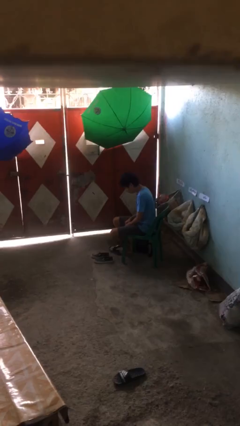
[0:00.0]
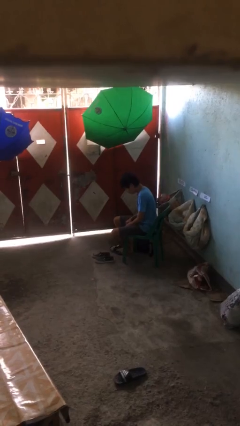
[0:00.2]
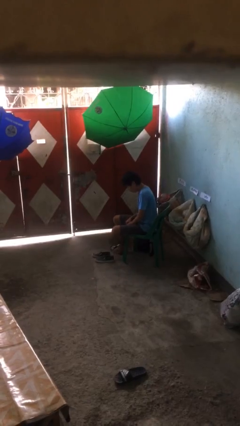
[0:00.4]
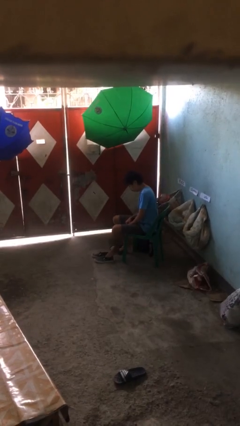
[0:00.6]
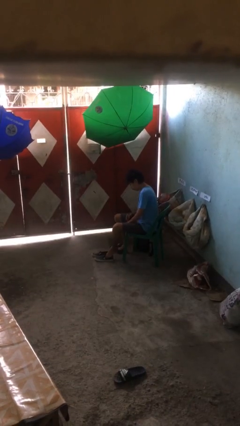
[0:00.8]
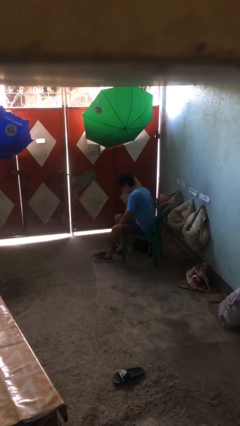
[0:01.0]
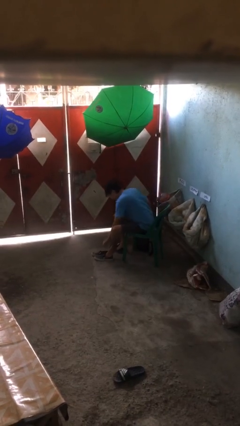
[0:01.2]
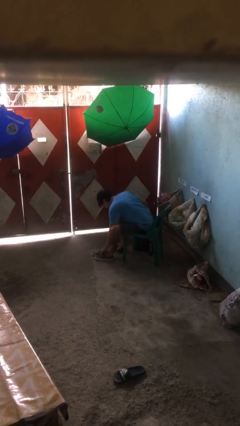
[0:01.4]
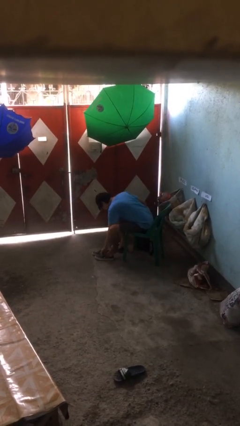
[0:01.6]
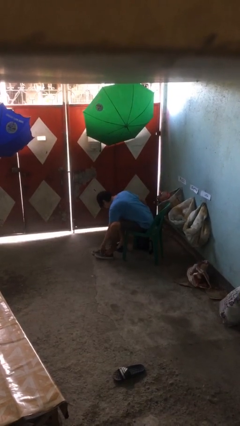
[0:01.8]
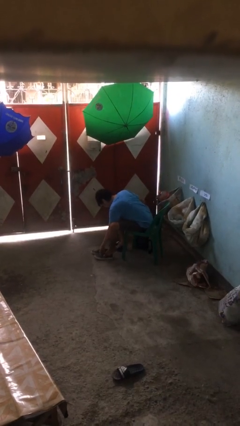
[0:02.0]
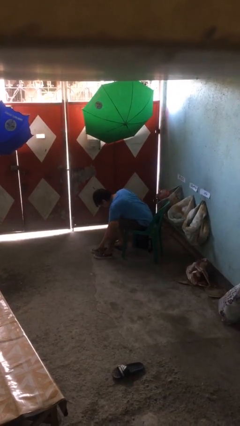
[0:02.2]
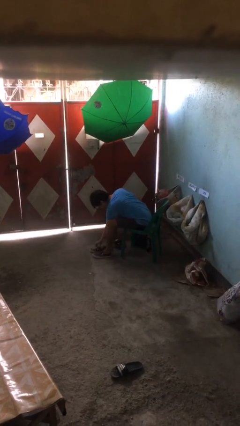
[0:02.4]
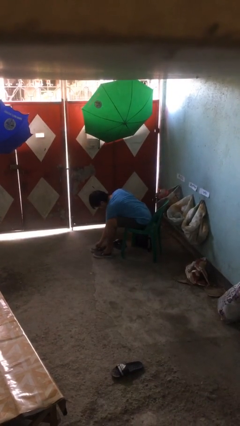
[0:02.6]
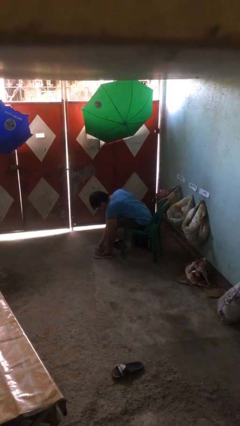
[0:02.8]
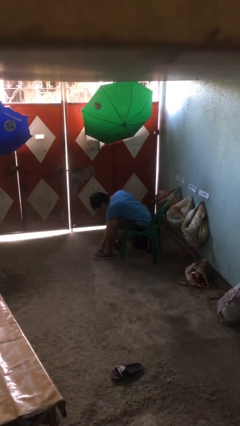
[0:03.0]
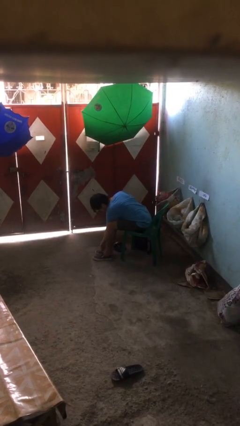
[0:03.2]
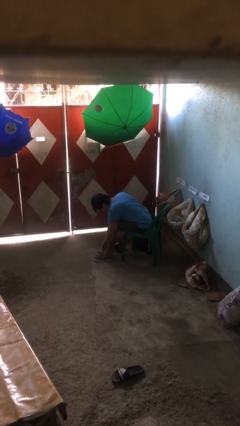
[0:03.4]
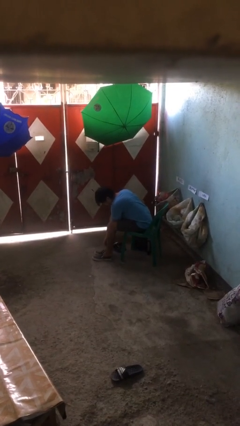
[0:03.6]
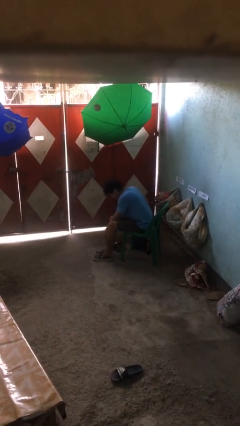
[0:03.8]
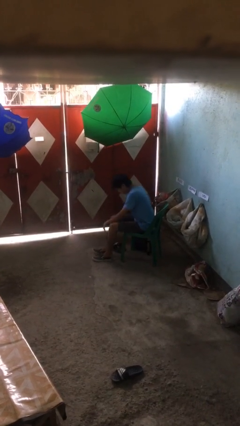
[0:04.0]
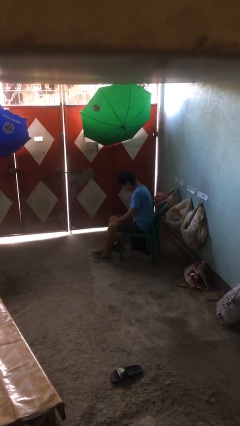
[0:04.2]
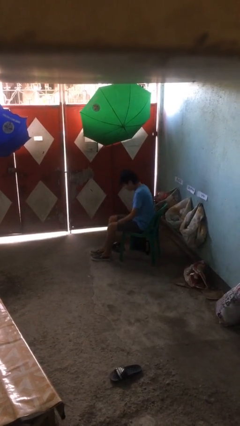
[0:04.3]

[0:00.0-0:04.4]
person puts on shoes

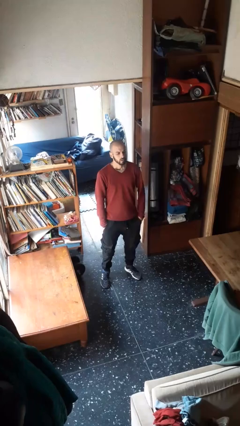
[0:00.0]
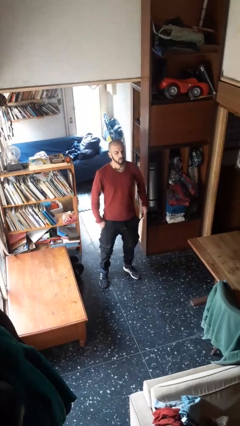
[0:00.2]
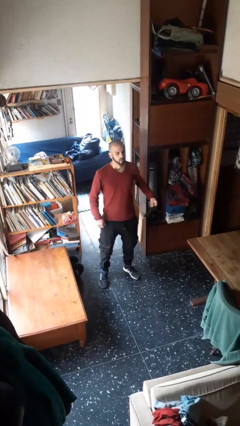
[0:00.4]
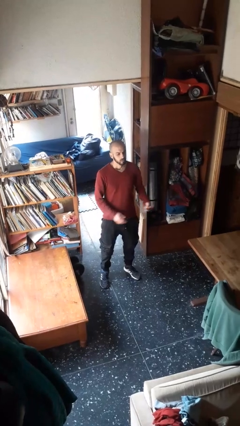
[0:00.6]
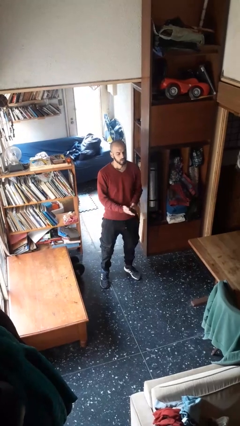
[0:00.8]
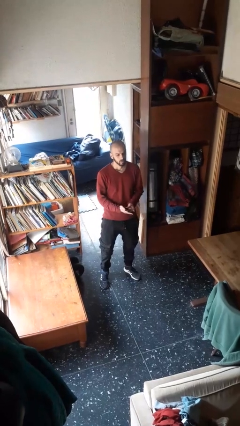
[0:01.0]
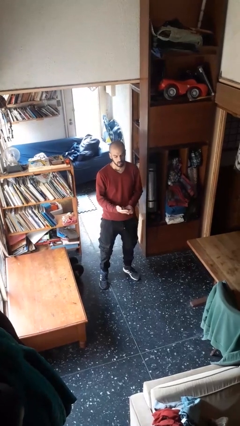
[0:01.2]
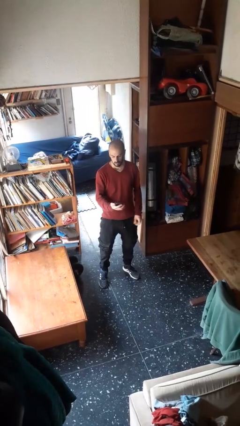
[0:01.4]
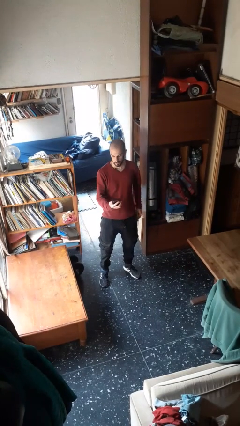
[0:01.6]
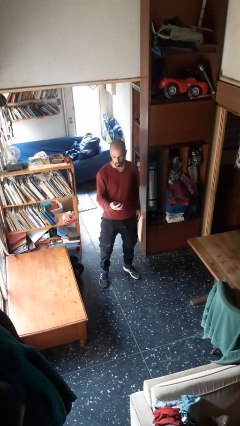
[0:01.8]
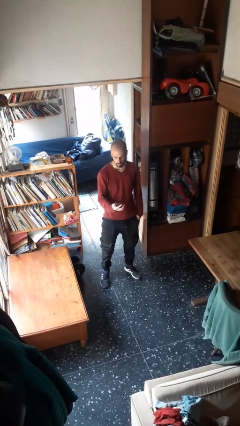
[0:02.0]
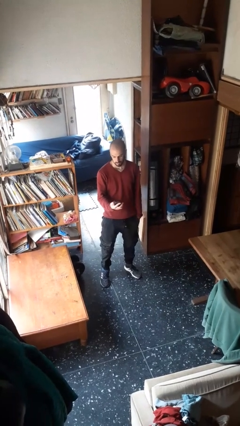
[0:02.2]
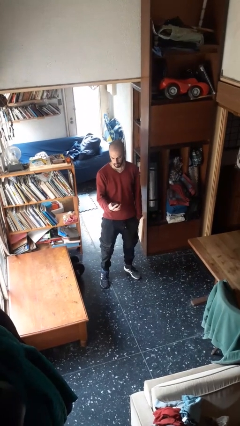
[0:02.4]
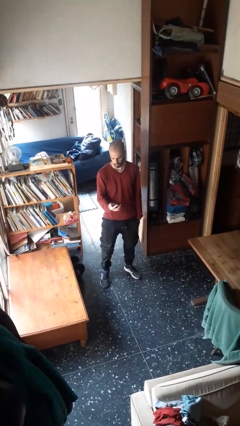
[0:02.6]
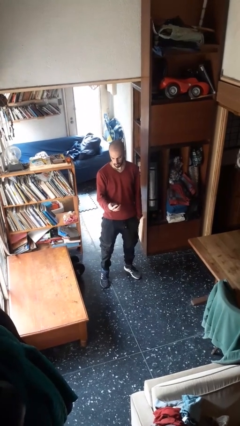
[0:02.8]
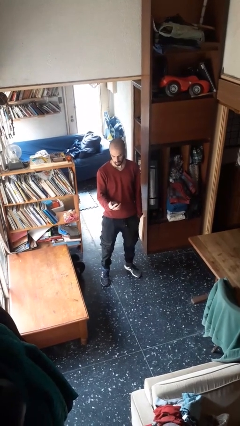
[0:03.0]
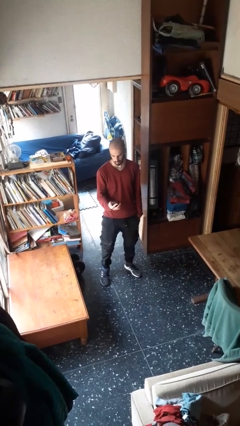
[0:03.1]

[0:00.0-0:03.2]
person takes phone from pocket

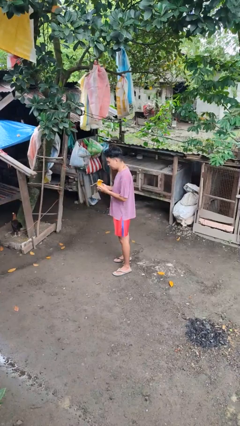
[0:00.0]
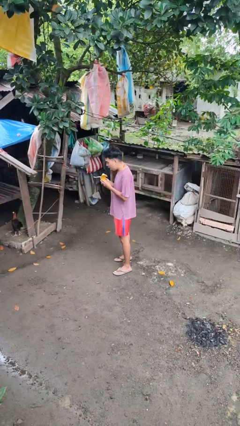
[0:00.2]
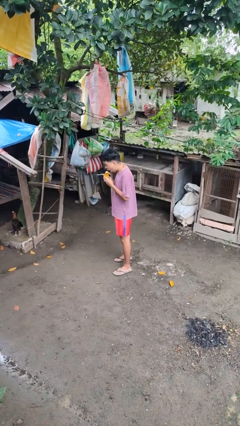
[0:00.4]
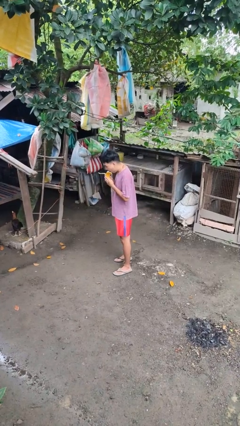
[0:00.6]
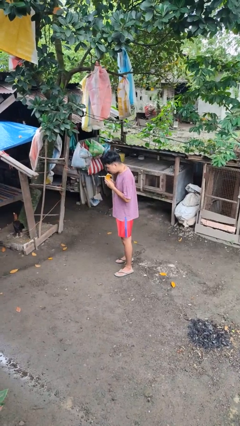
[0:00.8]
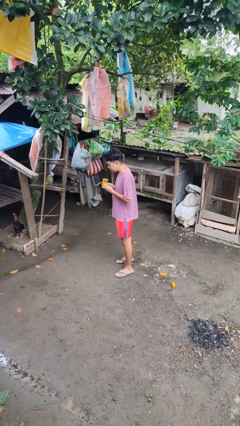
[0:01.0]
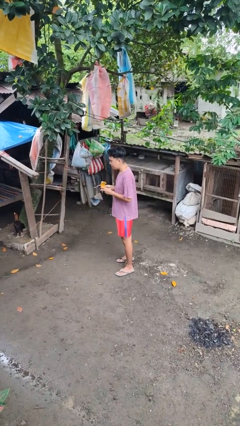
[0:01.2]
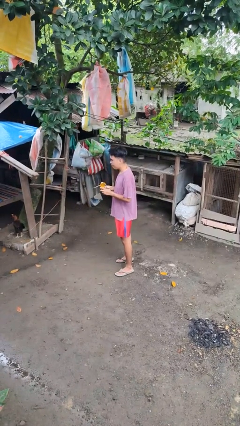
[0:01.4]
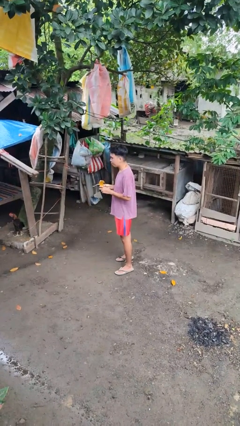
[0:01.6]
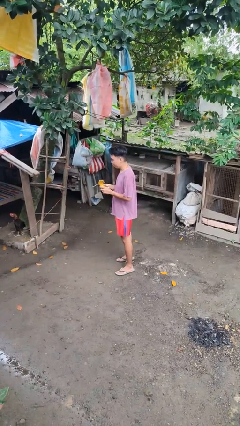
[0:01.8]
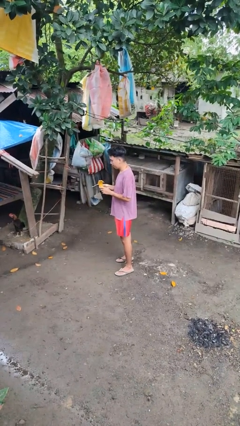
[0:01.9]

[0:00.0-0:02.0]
person eats banana

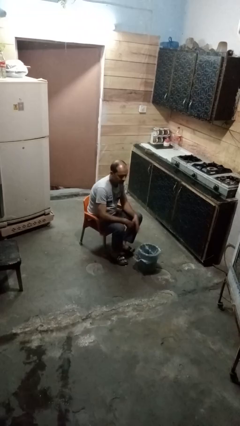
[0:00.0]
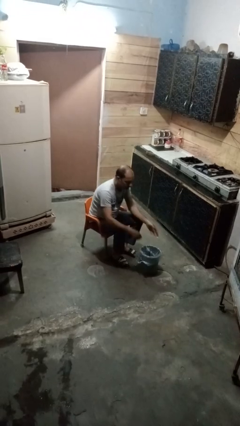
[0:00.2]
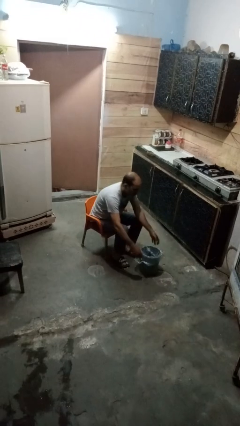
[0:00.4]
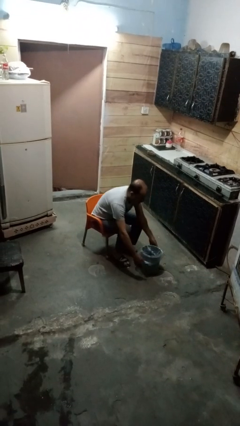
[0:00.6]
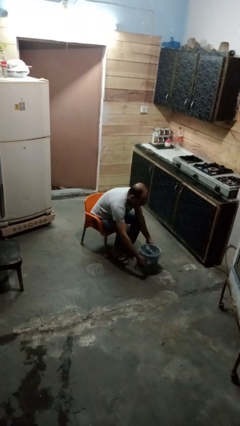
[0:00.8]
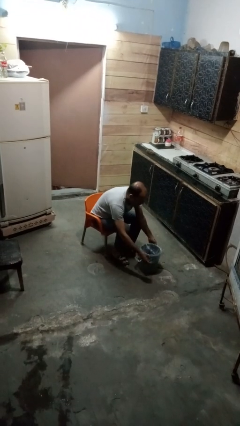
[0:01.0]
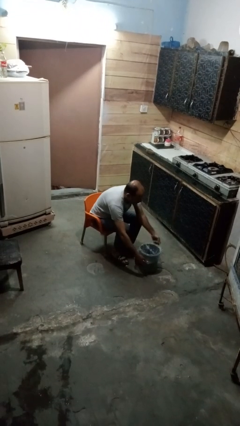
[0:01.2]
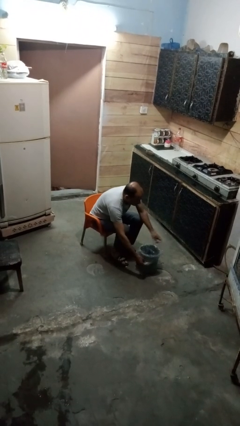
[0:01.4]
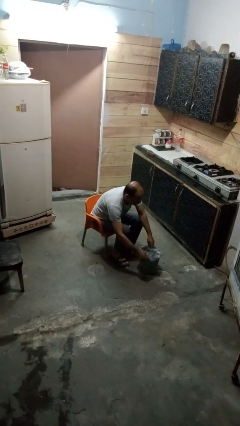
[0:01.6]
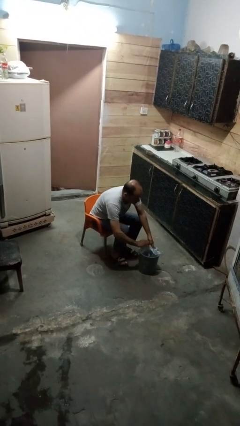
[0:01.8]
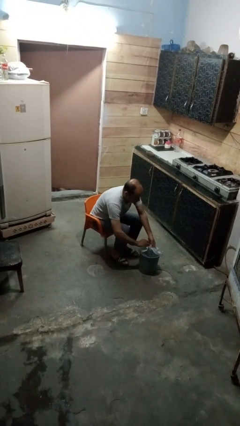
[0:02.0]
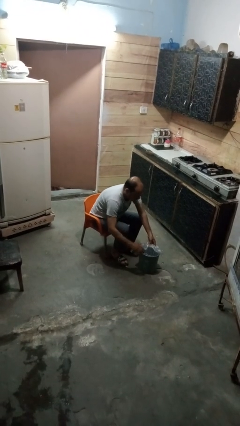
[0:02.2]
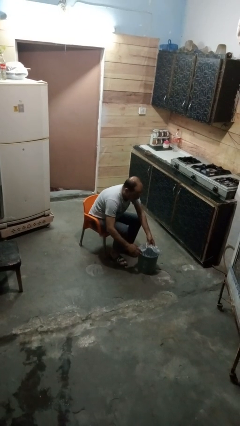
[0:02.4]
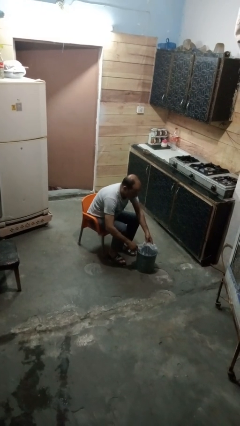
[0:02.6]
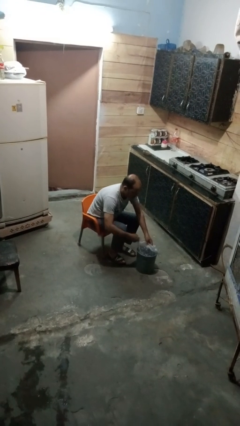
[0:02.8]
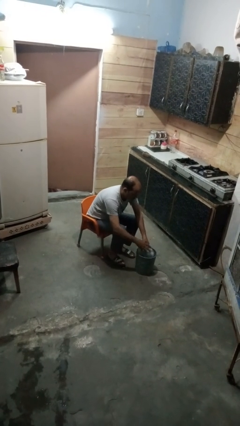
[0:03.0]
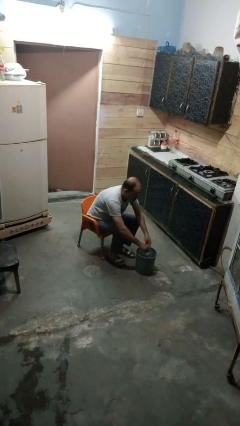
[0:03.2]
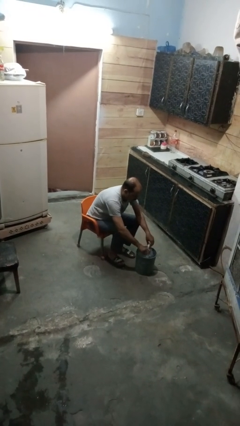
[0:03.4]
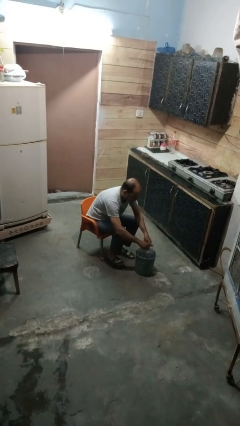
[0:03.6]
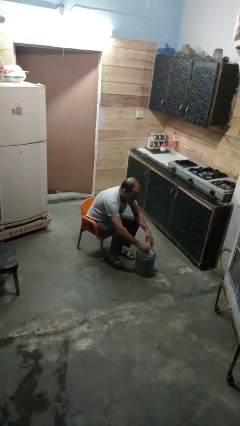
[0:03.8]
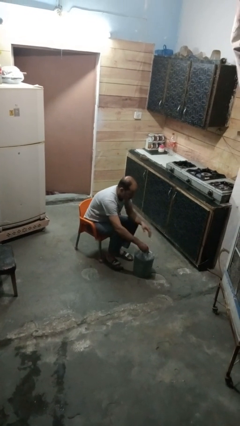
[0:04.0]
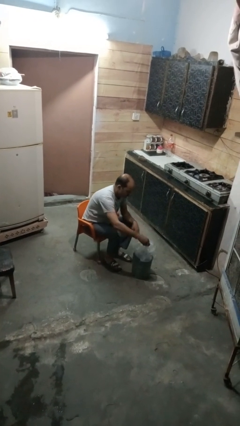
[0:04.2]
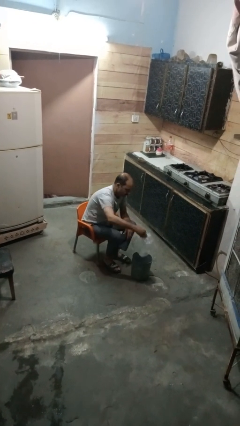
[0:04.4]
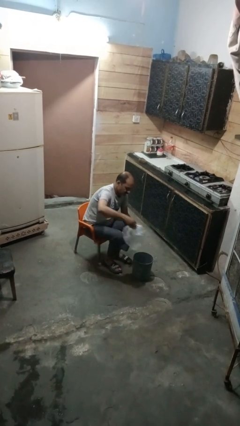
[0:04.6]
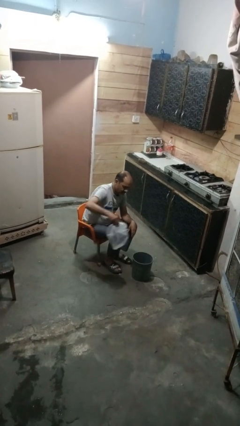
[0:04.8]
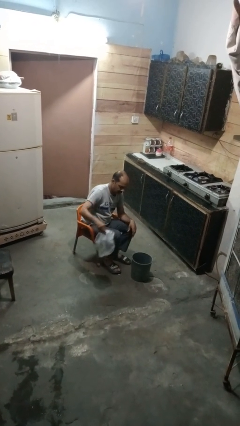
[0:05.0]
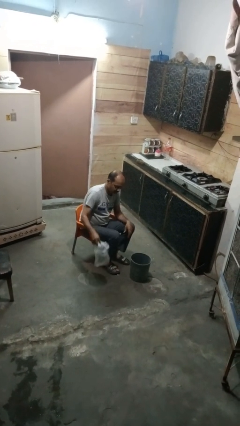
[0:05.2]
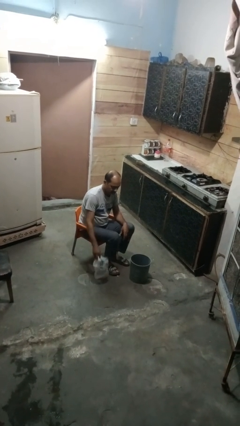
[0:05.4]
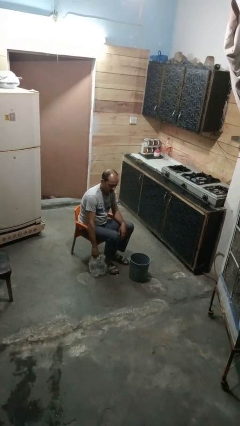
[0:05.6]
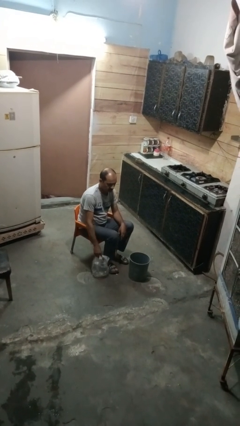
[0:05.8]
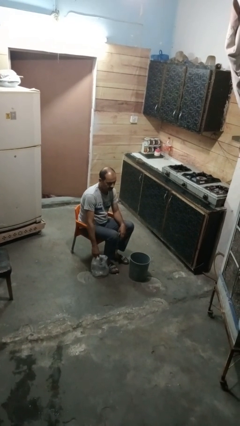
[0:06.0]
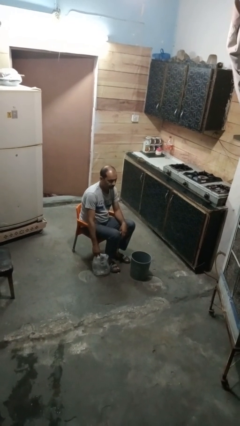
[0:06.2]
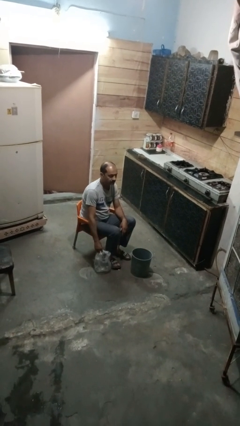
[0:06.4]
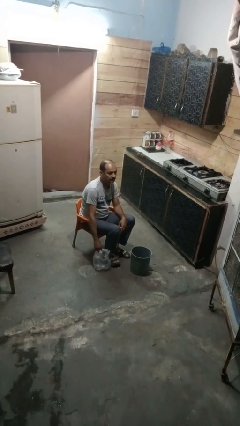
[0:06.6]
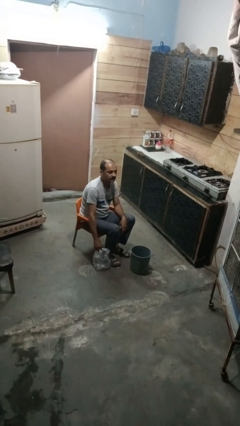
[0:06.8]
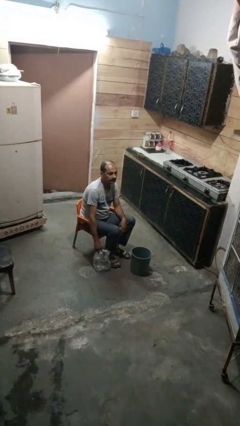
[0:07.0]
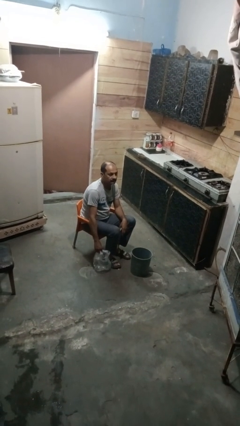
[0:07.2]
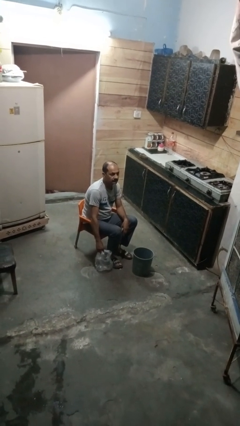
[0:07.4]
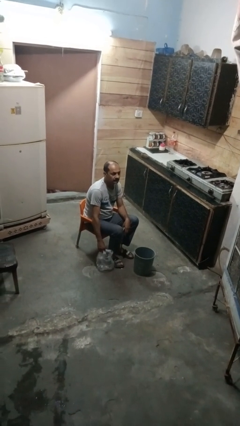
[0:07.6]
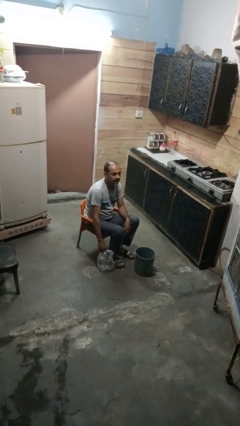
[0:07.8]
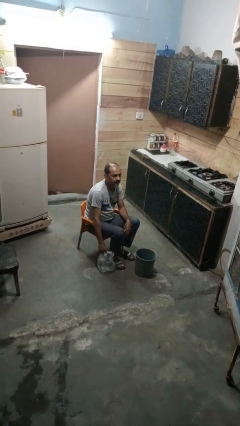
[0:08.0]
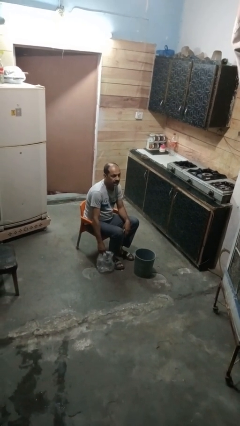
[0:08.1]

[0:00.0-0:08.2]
person removes trashbag from trashcan
